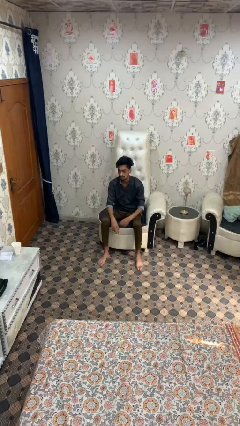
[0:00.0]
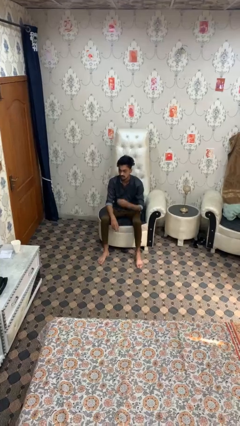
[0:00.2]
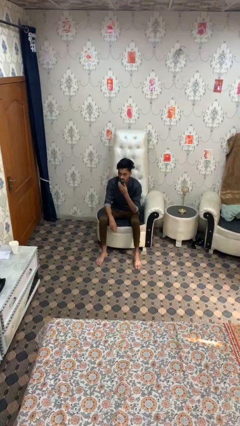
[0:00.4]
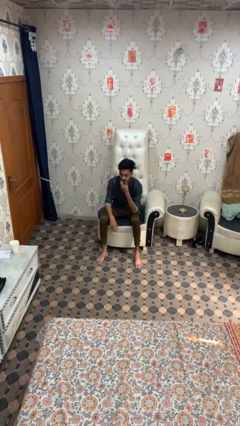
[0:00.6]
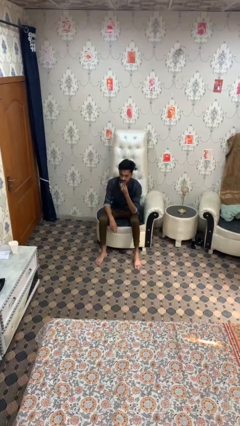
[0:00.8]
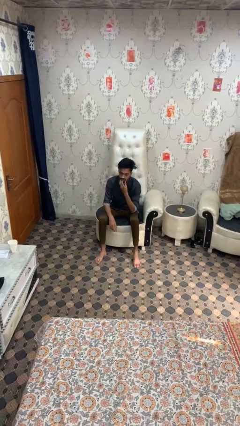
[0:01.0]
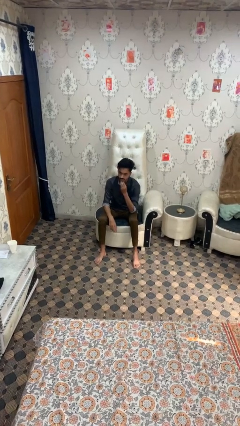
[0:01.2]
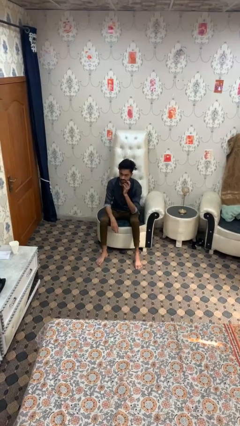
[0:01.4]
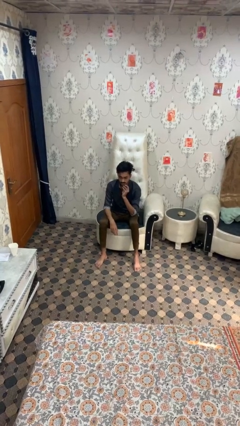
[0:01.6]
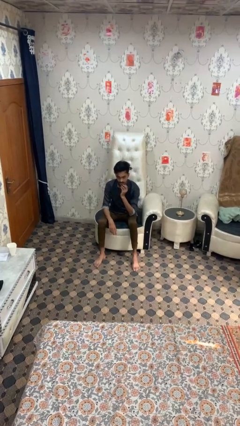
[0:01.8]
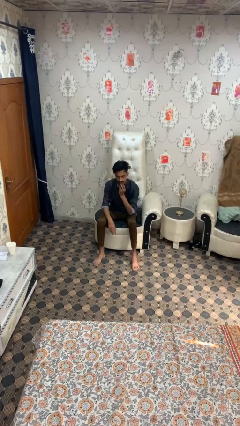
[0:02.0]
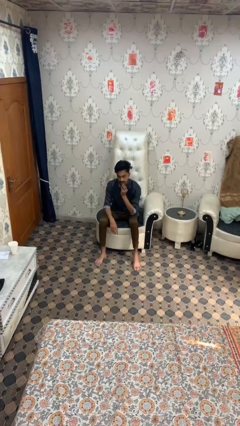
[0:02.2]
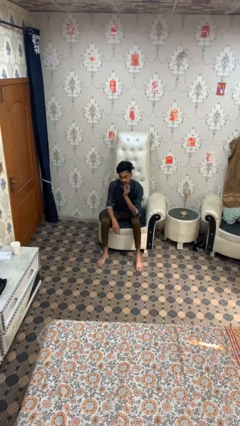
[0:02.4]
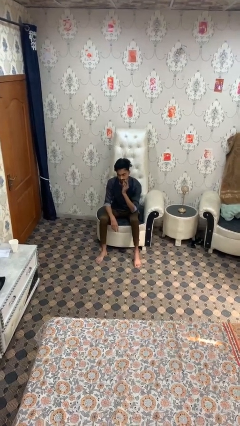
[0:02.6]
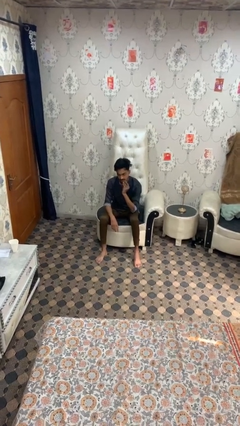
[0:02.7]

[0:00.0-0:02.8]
person strokes chin

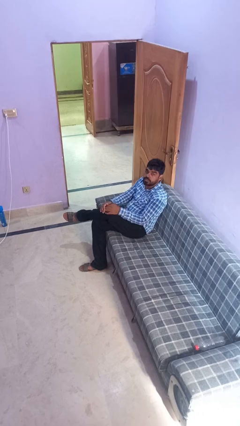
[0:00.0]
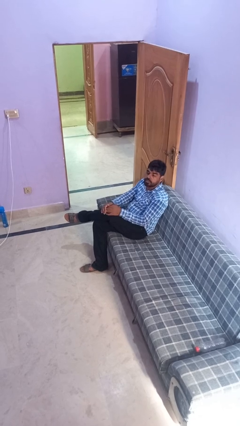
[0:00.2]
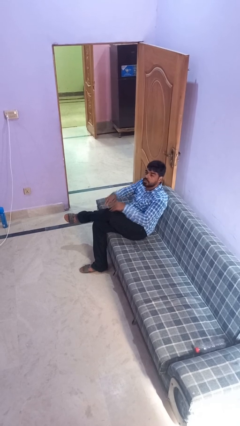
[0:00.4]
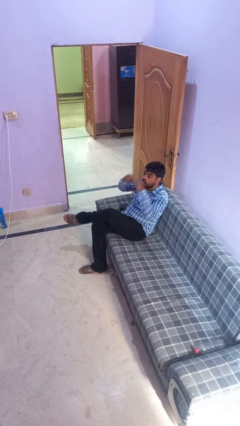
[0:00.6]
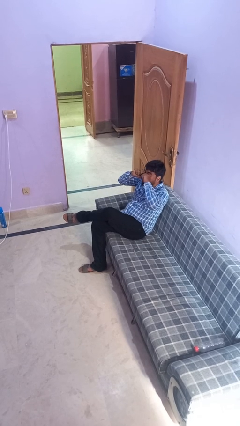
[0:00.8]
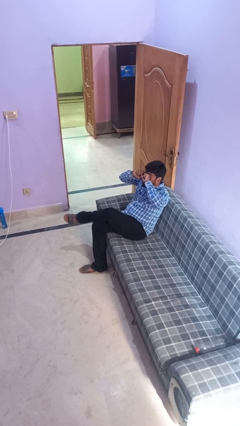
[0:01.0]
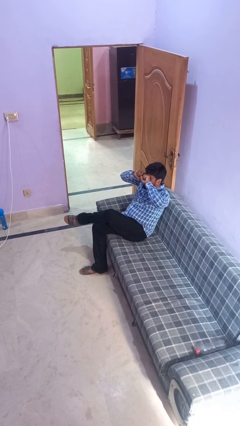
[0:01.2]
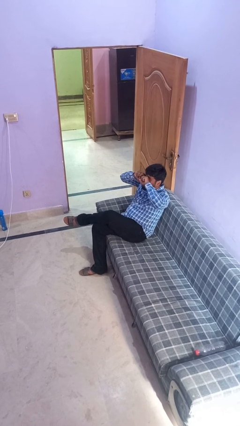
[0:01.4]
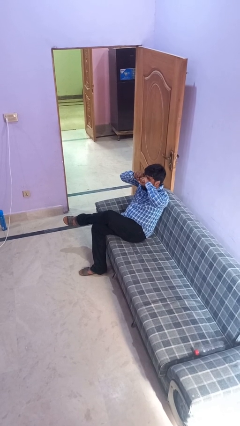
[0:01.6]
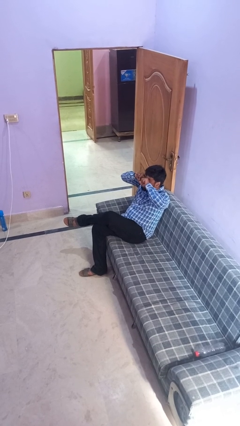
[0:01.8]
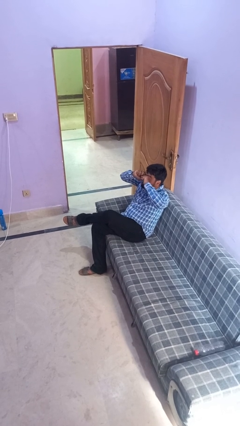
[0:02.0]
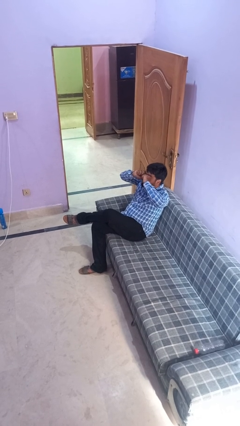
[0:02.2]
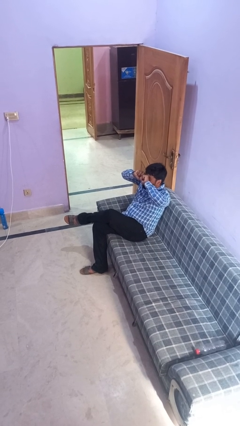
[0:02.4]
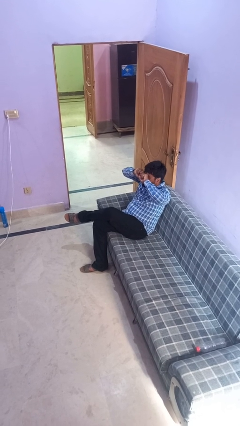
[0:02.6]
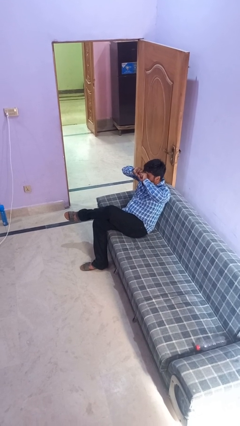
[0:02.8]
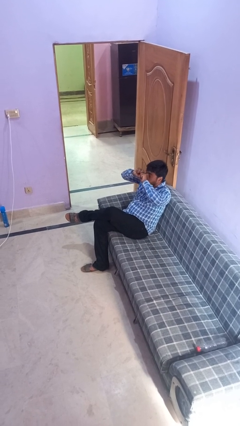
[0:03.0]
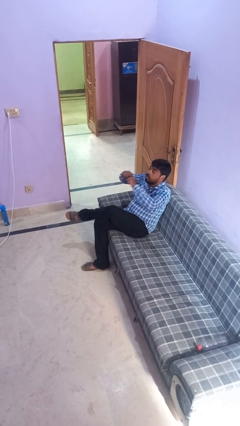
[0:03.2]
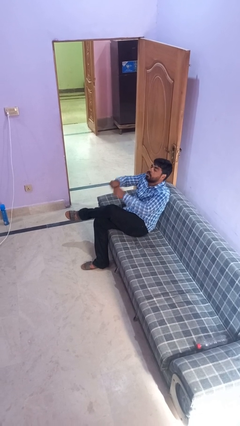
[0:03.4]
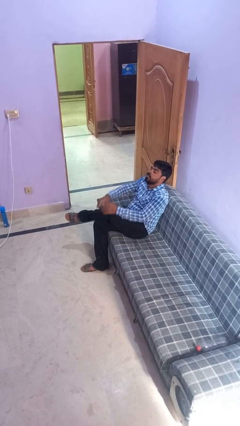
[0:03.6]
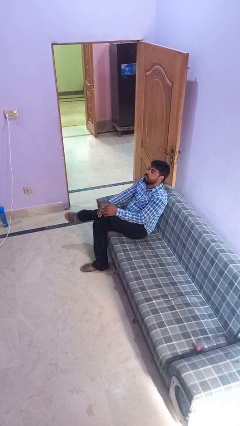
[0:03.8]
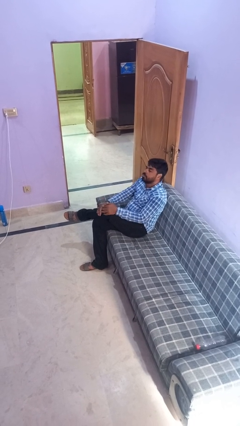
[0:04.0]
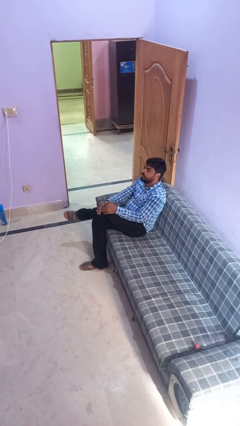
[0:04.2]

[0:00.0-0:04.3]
person rubs eyes

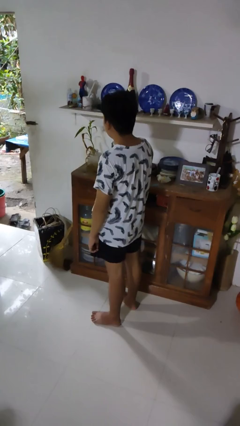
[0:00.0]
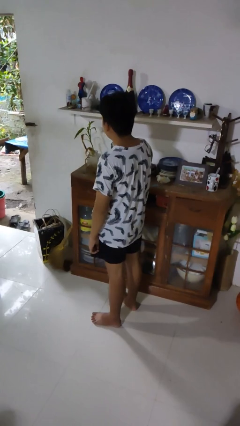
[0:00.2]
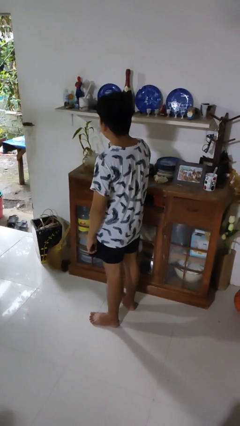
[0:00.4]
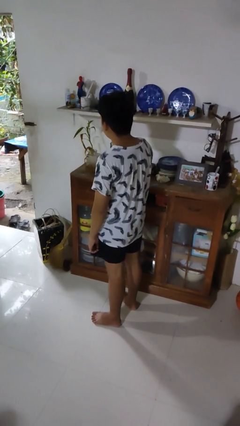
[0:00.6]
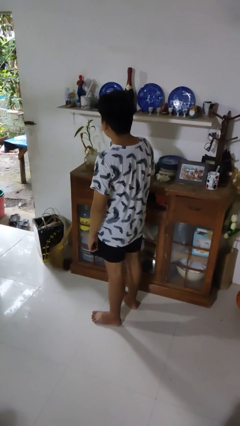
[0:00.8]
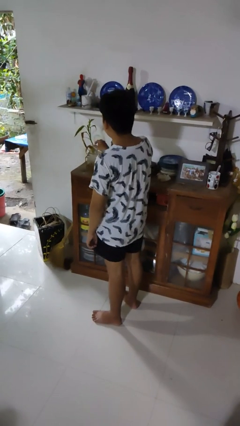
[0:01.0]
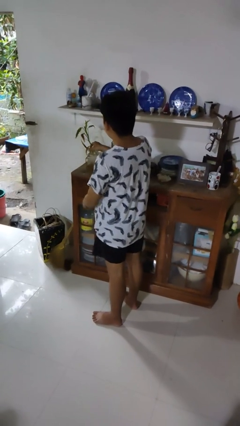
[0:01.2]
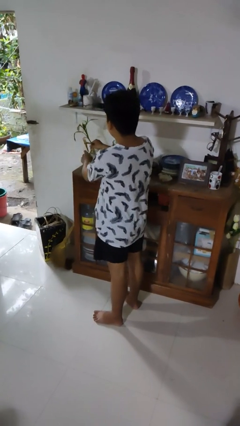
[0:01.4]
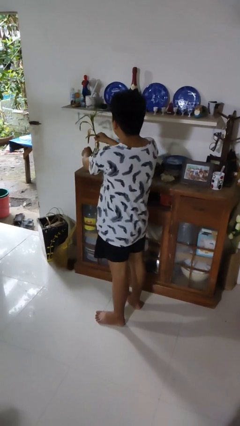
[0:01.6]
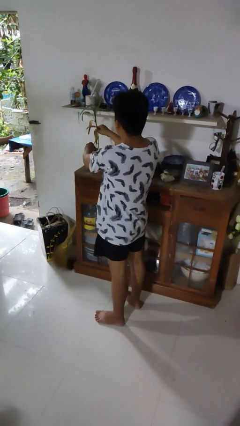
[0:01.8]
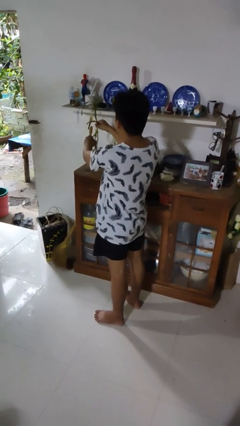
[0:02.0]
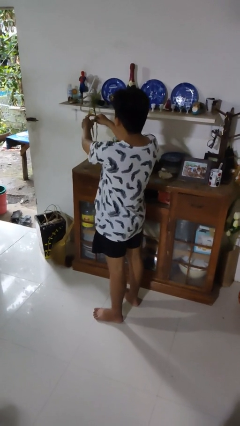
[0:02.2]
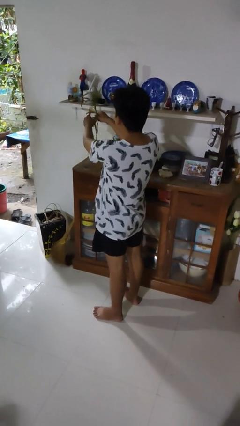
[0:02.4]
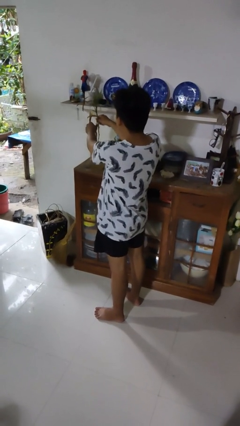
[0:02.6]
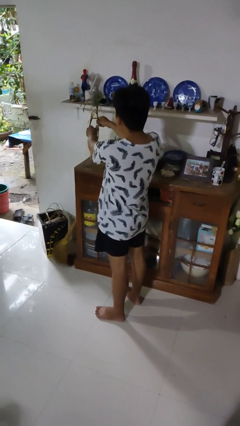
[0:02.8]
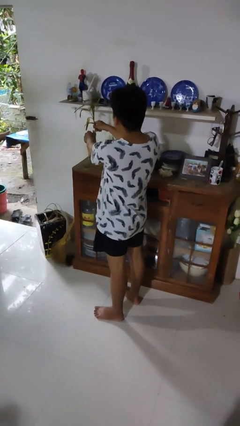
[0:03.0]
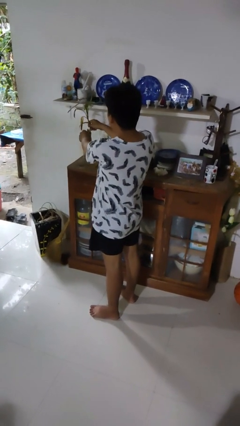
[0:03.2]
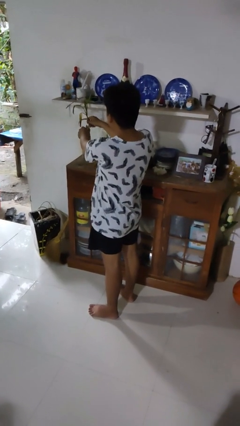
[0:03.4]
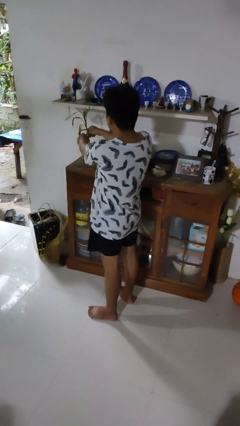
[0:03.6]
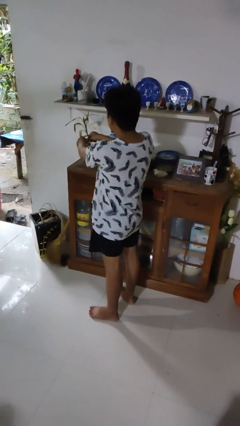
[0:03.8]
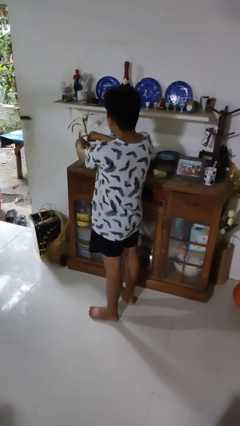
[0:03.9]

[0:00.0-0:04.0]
person arranges flowers in vase

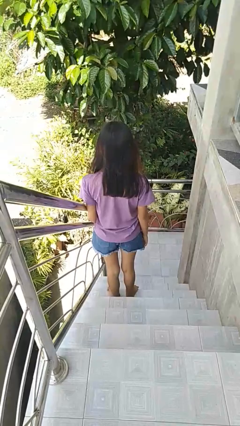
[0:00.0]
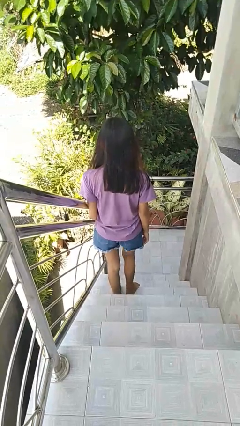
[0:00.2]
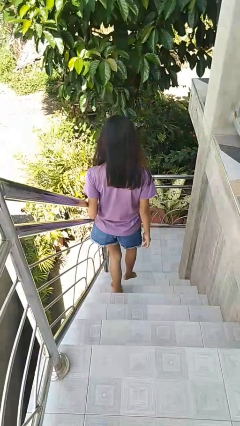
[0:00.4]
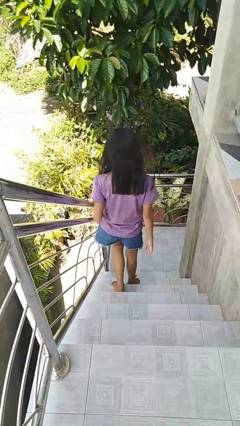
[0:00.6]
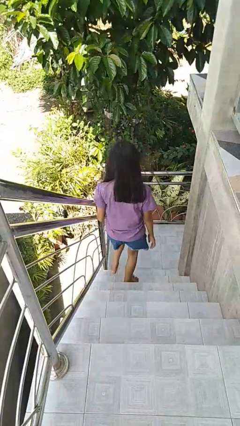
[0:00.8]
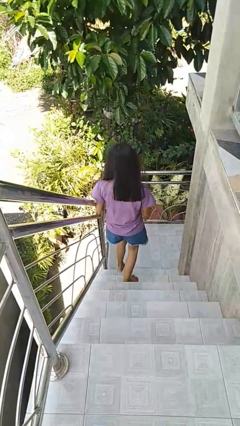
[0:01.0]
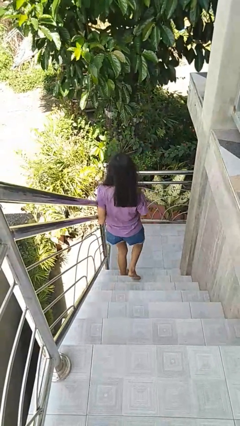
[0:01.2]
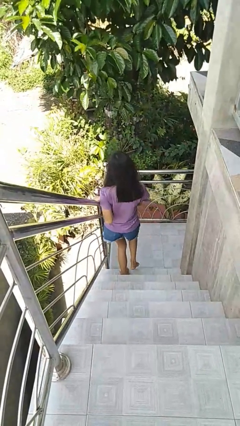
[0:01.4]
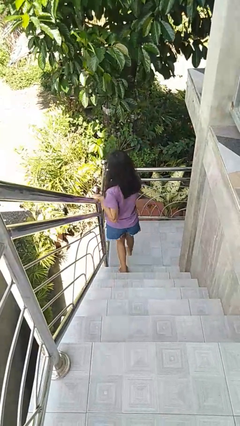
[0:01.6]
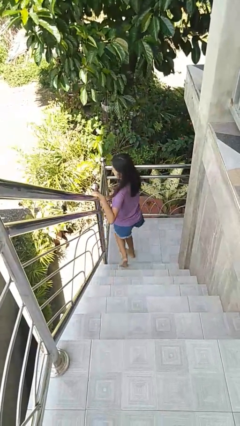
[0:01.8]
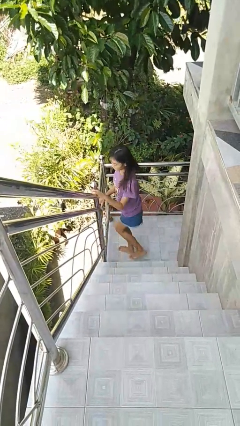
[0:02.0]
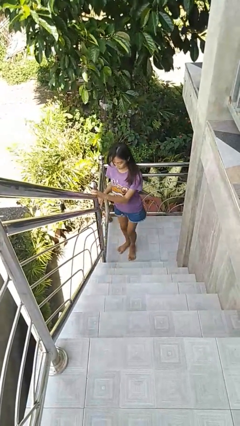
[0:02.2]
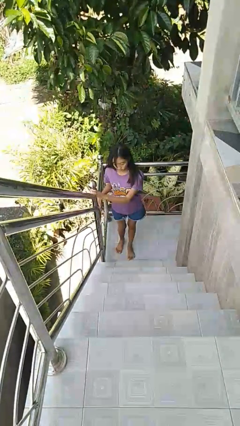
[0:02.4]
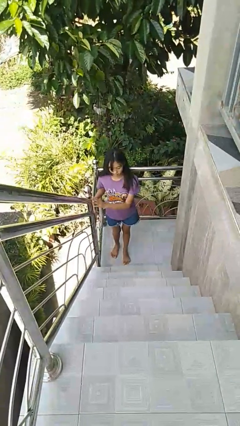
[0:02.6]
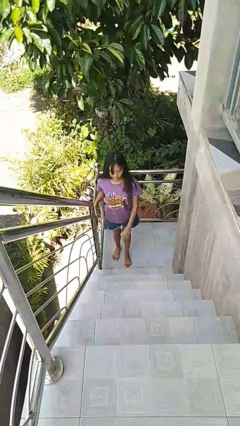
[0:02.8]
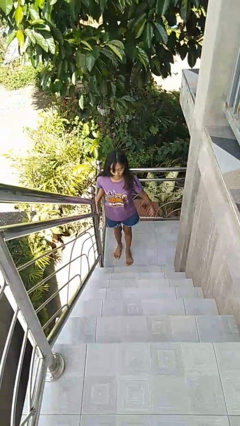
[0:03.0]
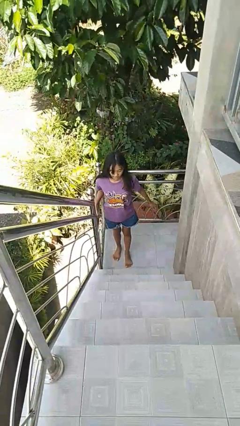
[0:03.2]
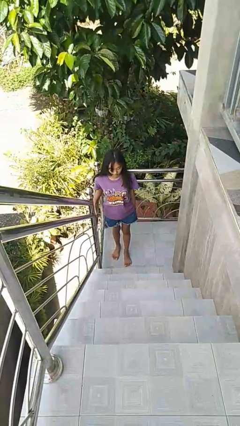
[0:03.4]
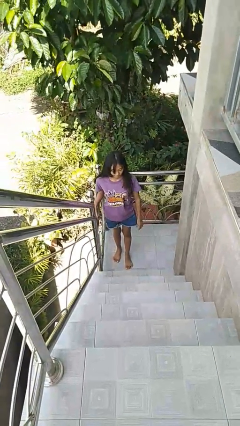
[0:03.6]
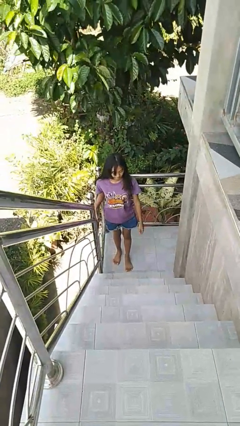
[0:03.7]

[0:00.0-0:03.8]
person climbs down stairs

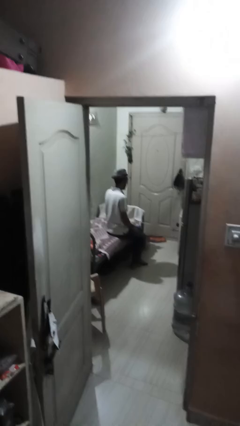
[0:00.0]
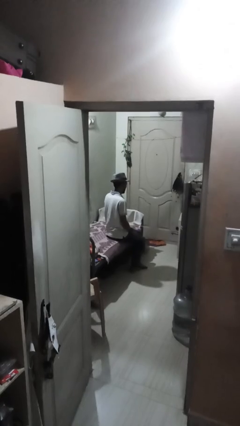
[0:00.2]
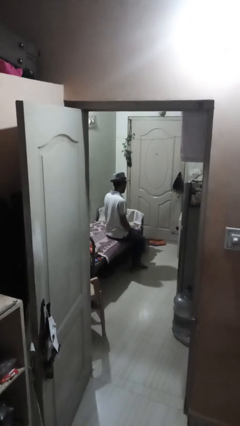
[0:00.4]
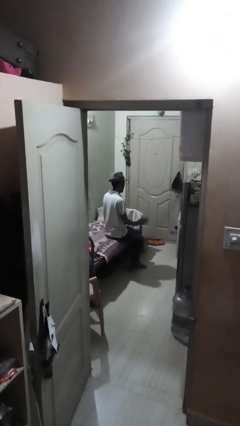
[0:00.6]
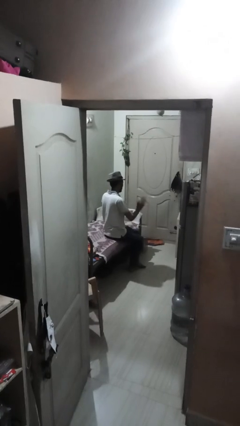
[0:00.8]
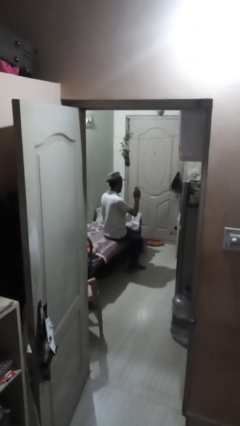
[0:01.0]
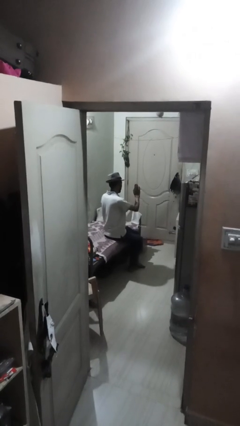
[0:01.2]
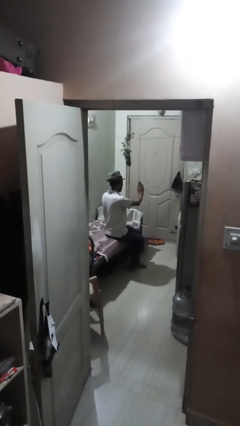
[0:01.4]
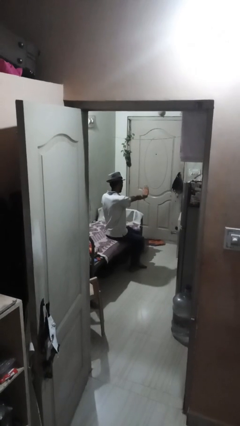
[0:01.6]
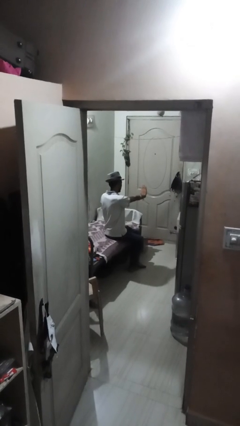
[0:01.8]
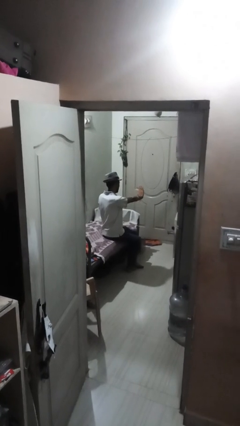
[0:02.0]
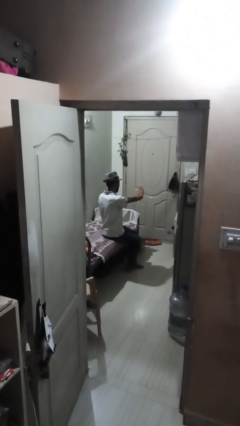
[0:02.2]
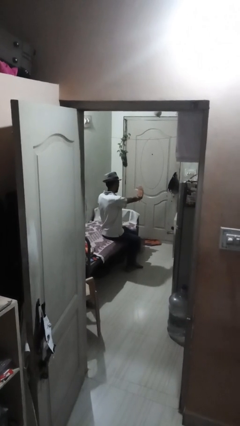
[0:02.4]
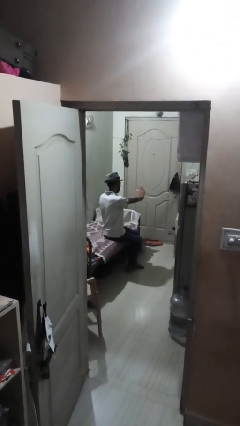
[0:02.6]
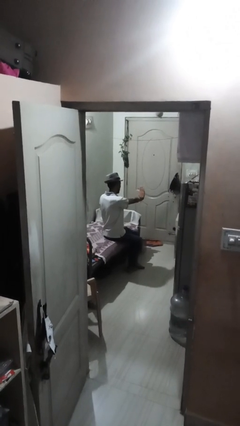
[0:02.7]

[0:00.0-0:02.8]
person gestures stop
